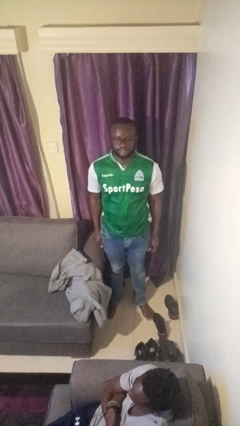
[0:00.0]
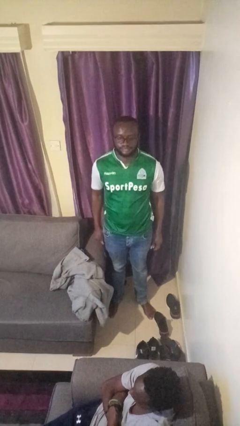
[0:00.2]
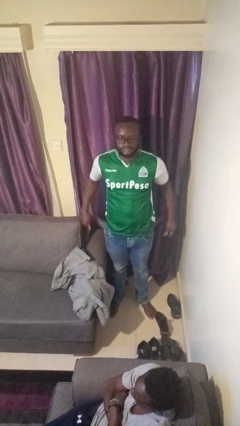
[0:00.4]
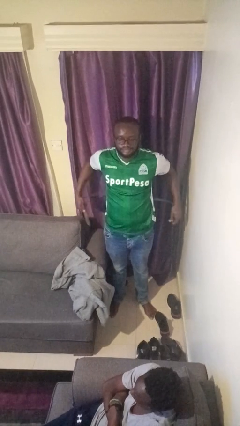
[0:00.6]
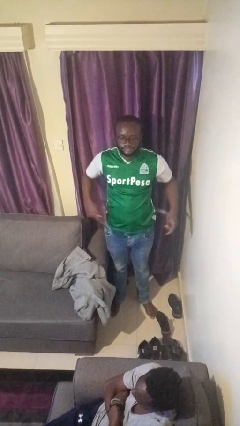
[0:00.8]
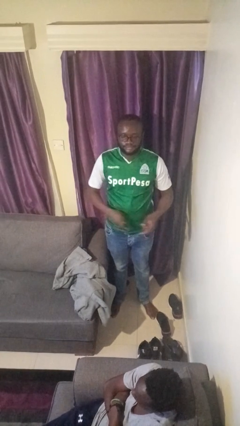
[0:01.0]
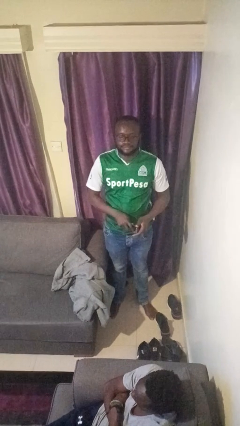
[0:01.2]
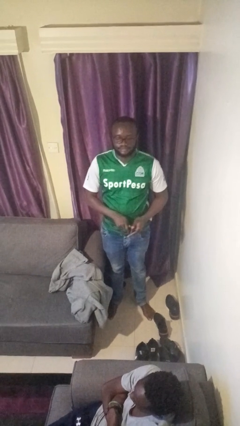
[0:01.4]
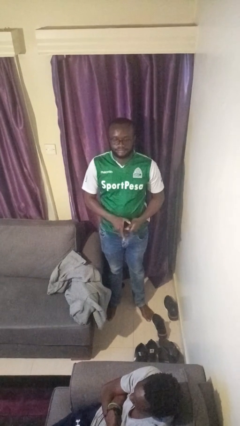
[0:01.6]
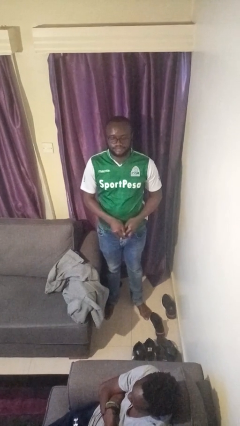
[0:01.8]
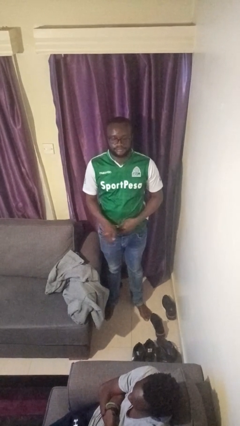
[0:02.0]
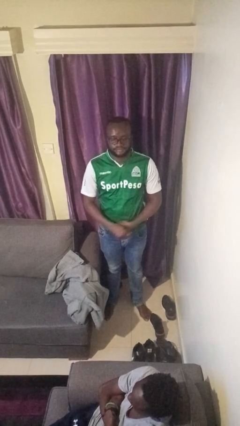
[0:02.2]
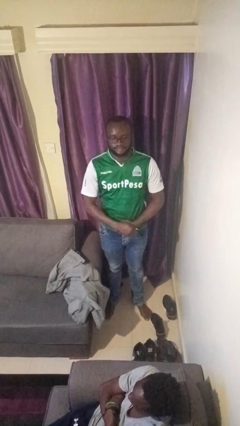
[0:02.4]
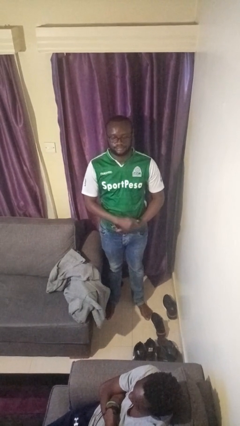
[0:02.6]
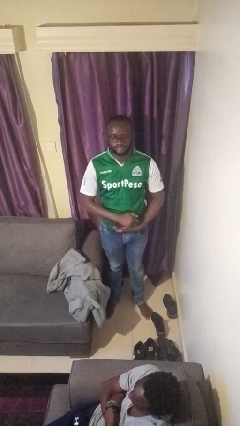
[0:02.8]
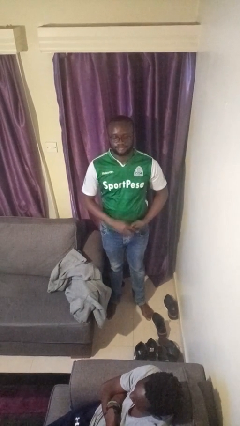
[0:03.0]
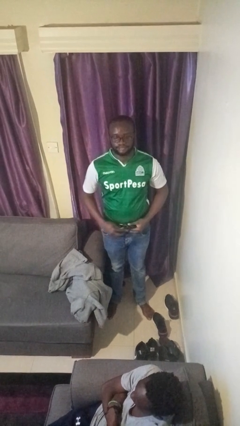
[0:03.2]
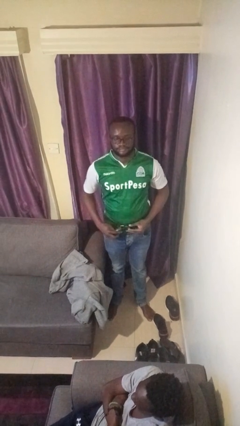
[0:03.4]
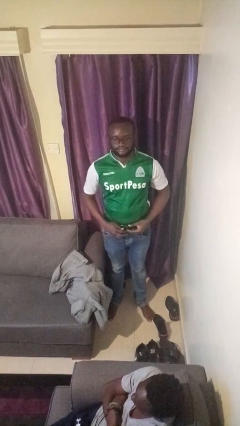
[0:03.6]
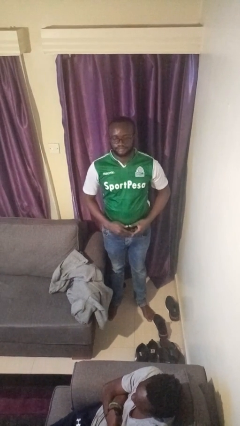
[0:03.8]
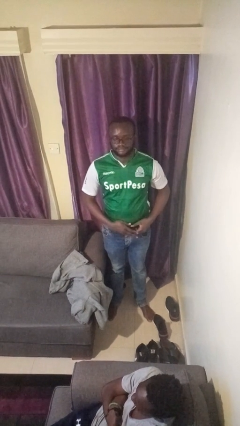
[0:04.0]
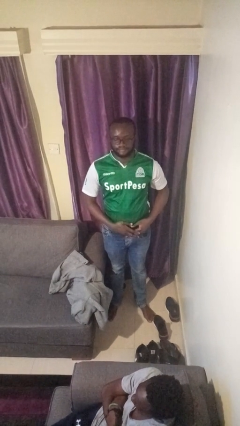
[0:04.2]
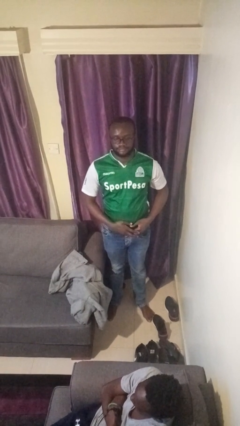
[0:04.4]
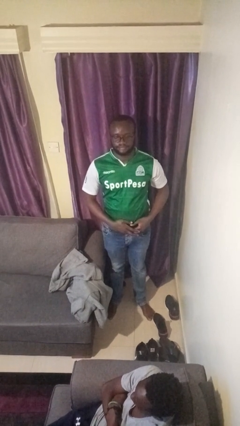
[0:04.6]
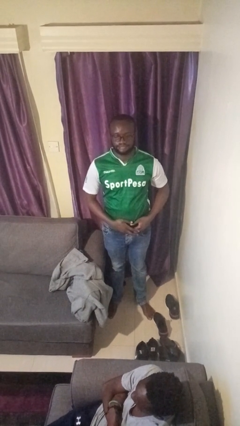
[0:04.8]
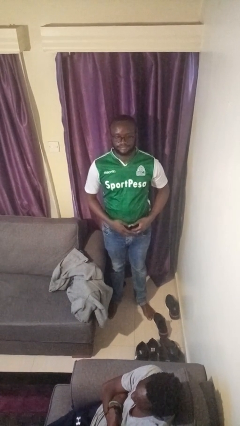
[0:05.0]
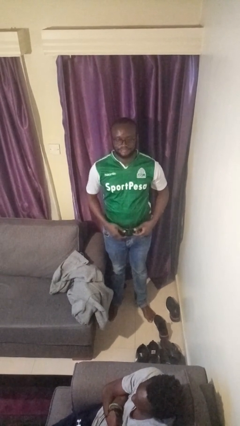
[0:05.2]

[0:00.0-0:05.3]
person puts on belt

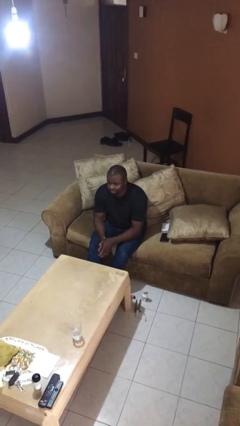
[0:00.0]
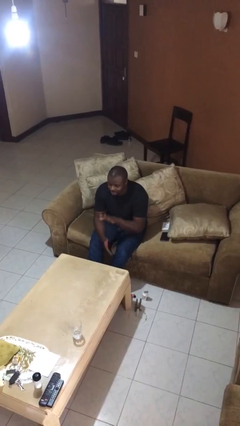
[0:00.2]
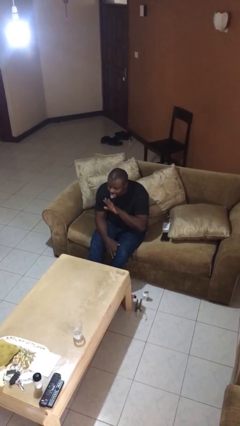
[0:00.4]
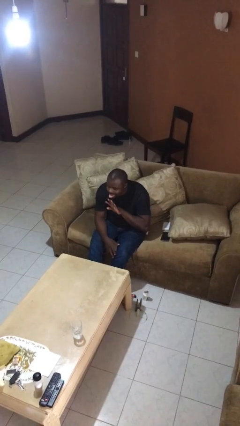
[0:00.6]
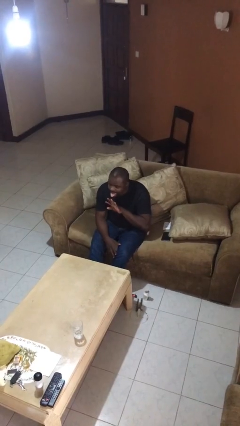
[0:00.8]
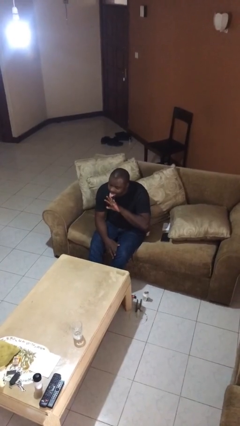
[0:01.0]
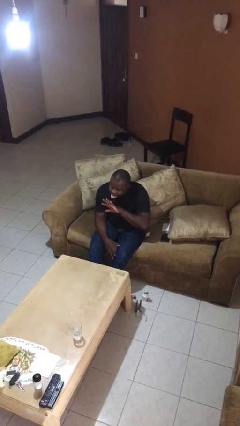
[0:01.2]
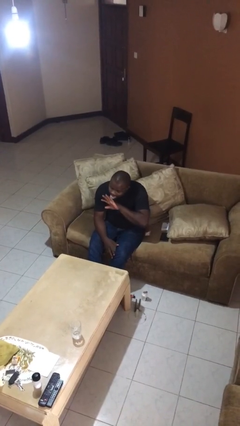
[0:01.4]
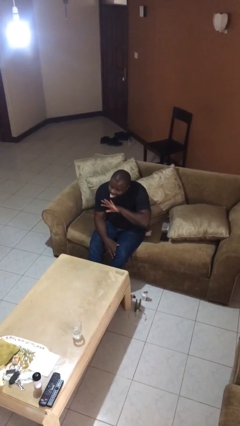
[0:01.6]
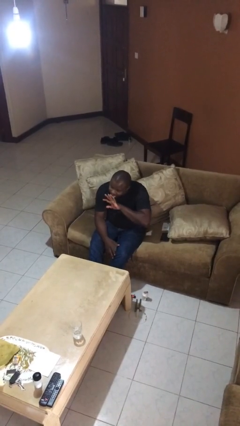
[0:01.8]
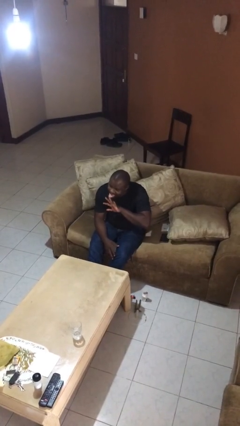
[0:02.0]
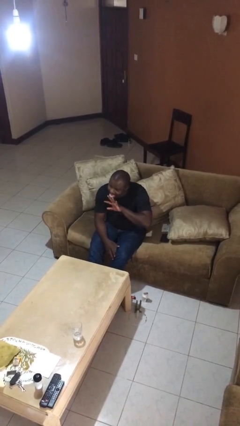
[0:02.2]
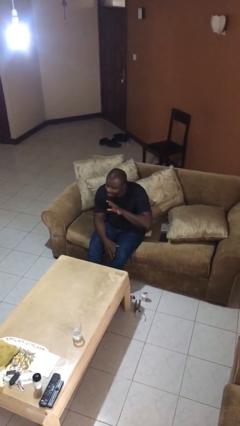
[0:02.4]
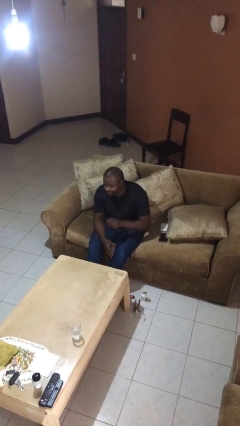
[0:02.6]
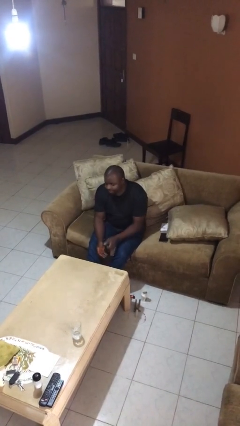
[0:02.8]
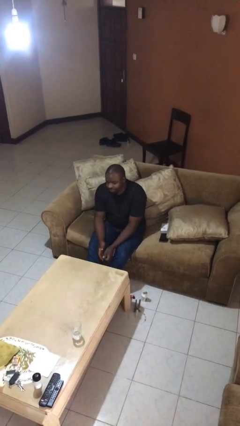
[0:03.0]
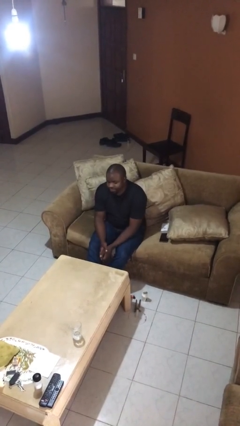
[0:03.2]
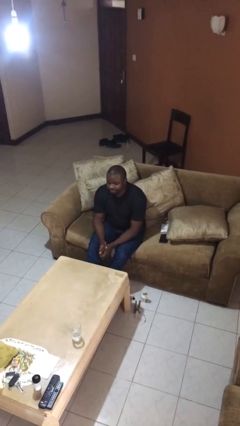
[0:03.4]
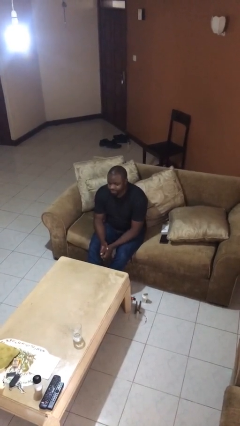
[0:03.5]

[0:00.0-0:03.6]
person licks fingers

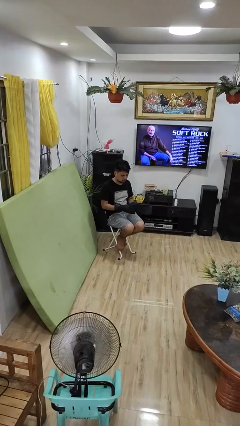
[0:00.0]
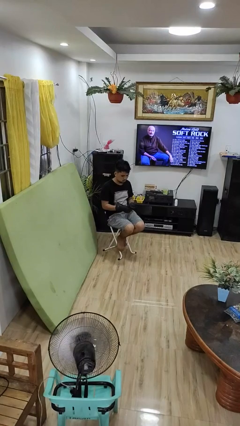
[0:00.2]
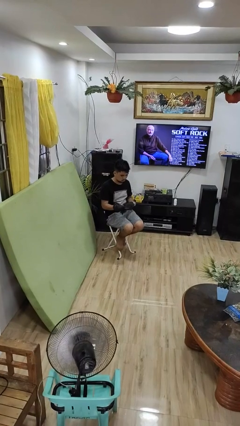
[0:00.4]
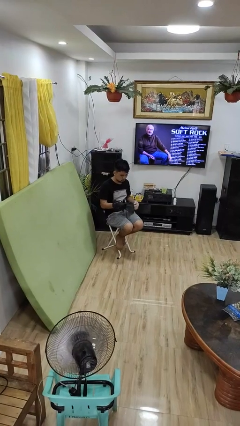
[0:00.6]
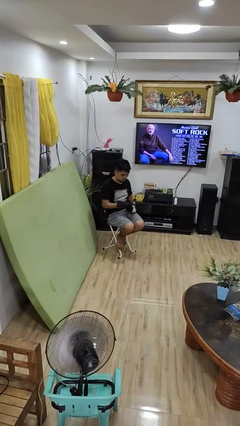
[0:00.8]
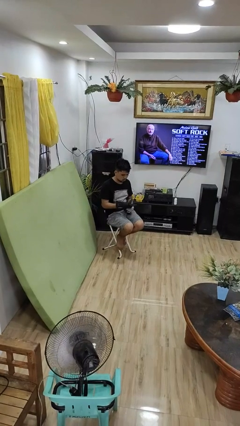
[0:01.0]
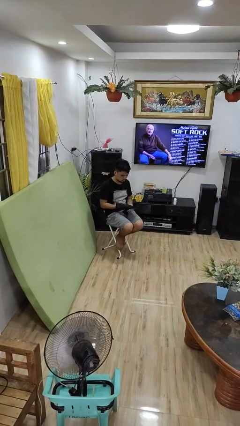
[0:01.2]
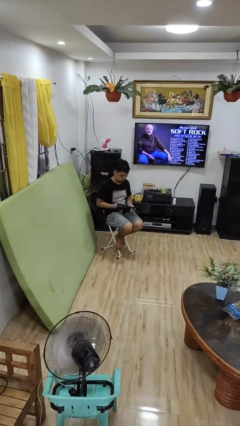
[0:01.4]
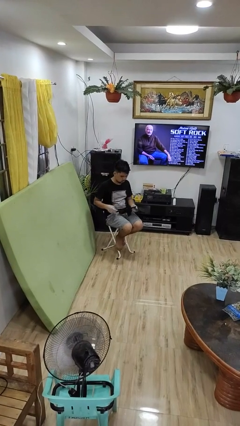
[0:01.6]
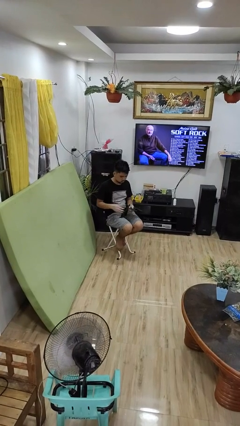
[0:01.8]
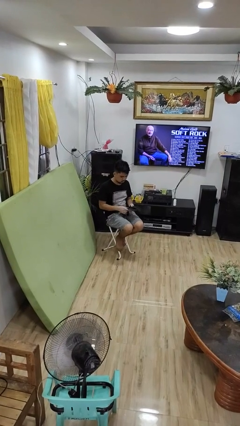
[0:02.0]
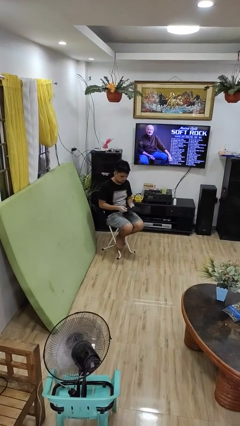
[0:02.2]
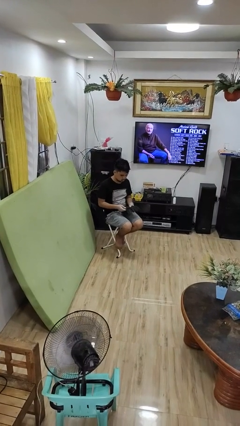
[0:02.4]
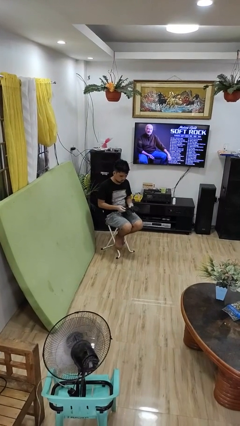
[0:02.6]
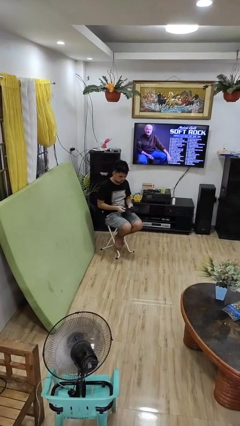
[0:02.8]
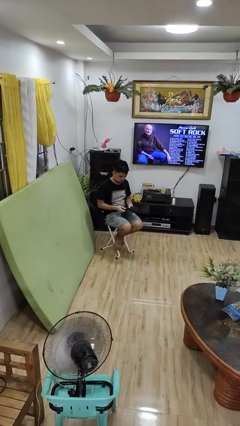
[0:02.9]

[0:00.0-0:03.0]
person takes off gloves

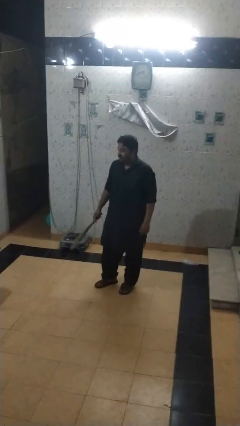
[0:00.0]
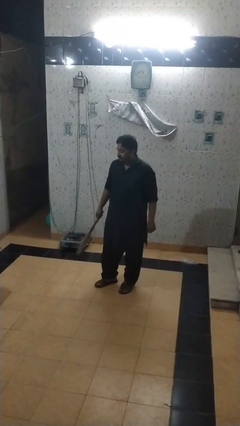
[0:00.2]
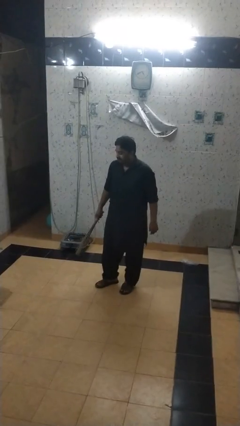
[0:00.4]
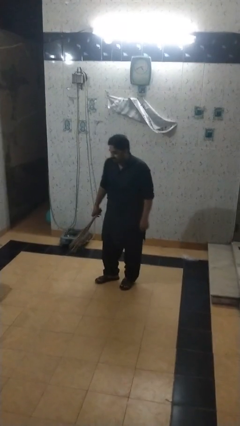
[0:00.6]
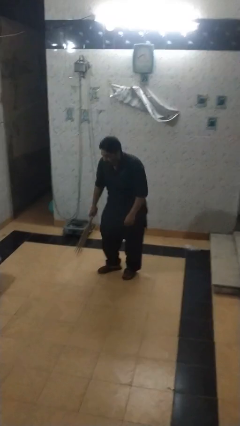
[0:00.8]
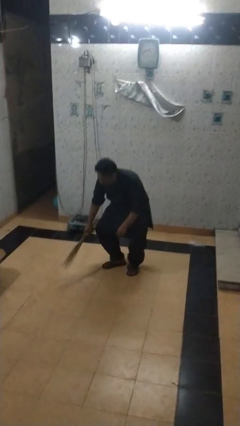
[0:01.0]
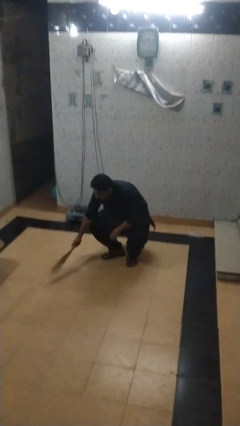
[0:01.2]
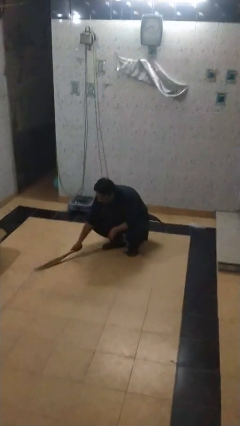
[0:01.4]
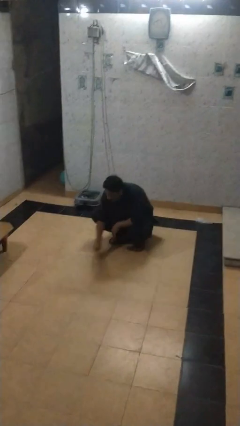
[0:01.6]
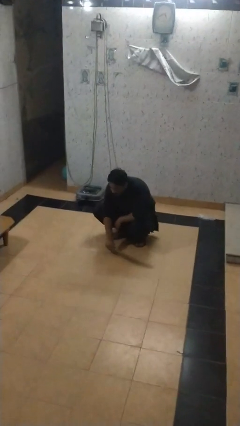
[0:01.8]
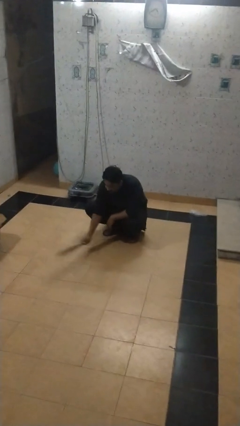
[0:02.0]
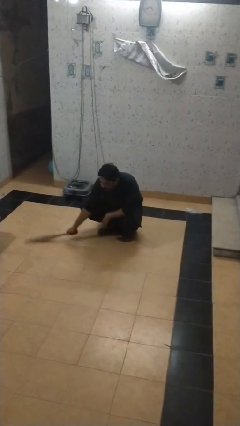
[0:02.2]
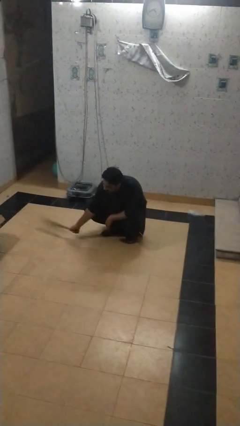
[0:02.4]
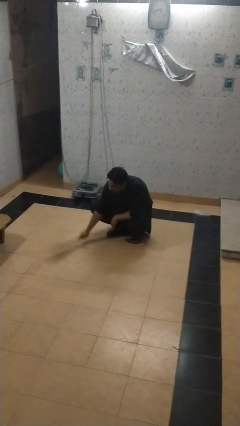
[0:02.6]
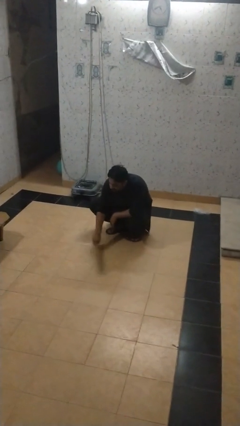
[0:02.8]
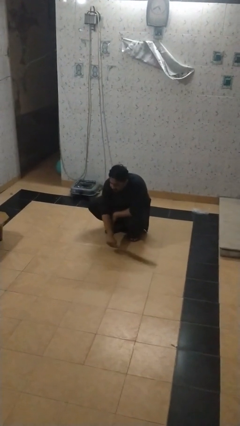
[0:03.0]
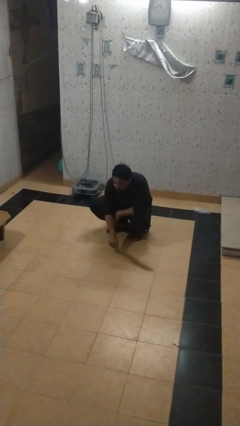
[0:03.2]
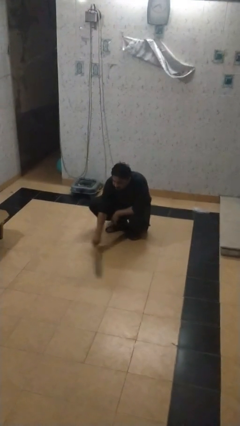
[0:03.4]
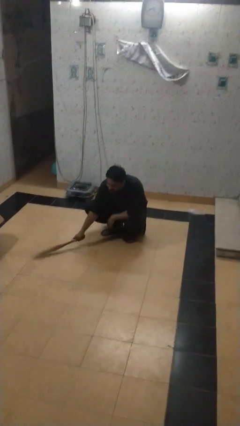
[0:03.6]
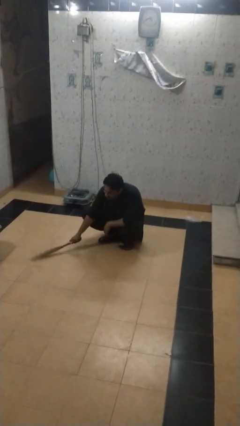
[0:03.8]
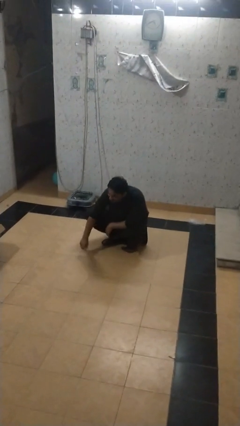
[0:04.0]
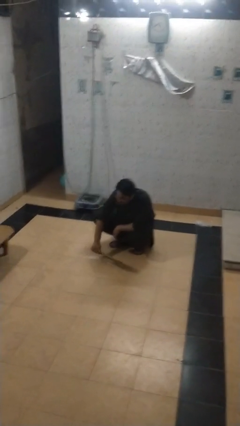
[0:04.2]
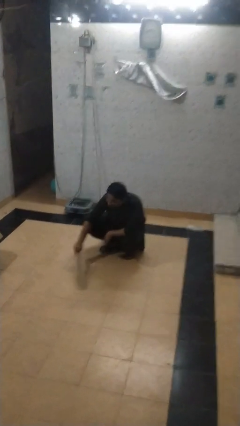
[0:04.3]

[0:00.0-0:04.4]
person sweeps floor

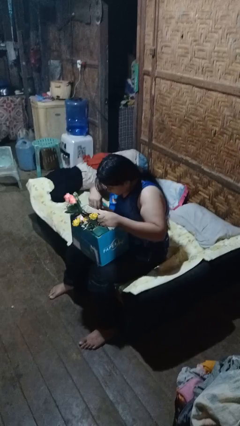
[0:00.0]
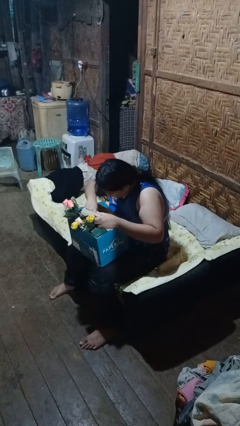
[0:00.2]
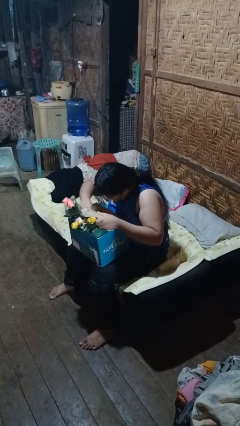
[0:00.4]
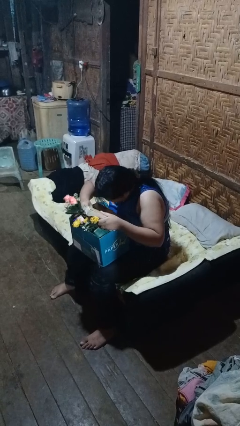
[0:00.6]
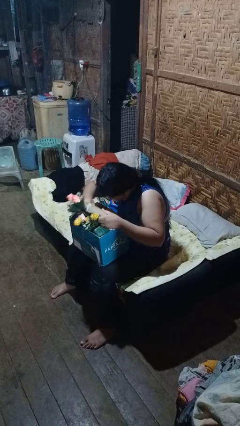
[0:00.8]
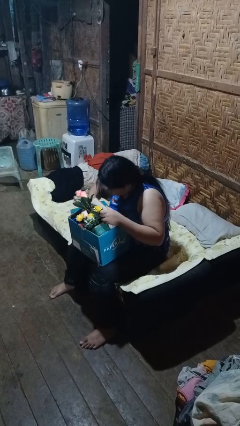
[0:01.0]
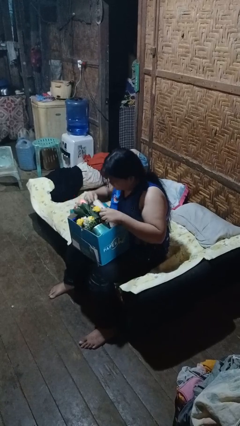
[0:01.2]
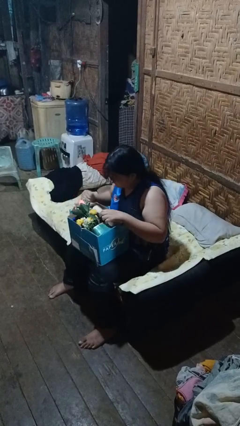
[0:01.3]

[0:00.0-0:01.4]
person searches in box
